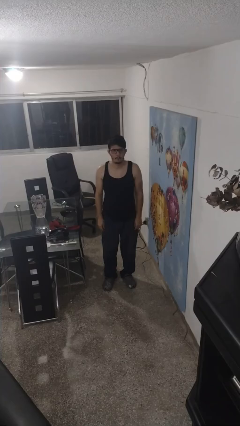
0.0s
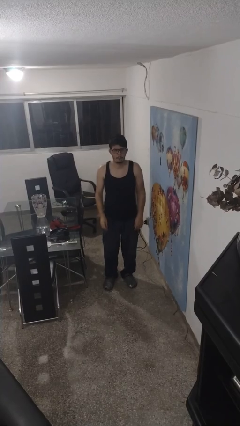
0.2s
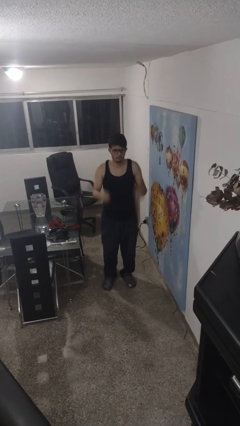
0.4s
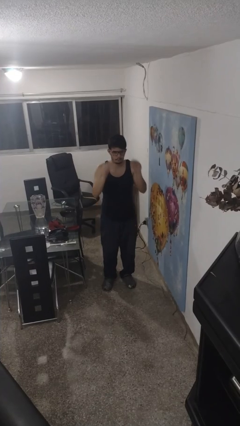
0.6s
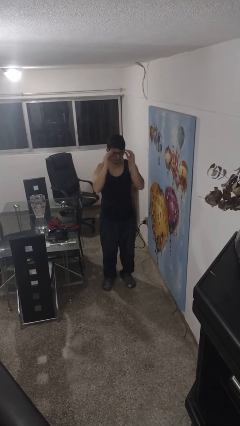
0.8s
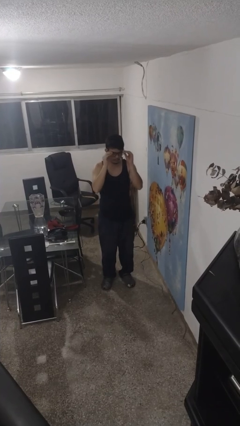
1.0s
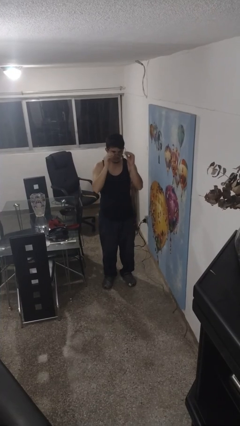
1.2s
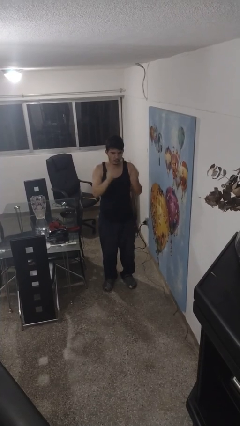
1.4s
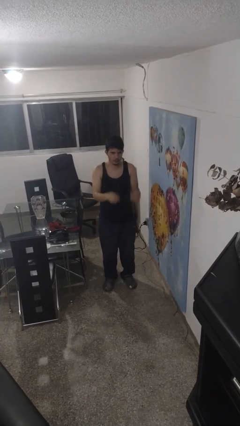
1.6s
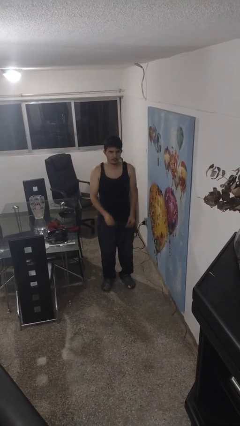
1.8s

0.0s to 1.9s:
person takes off glasses

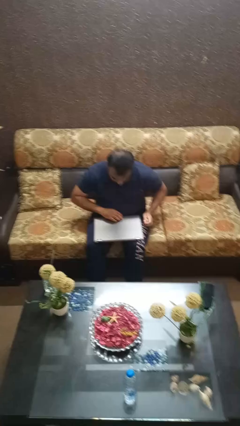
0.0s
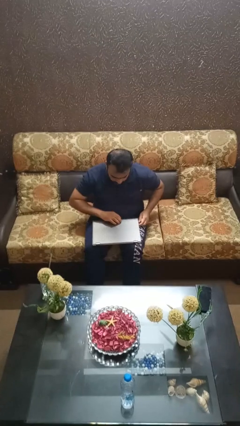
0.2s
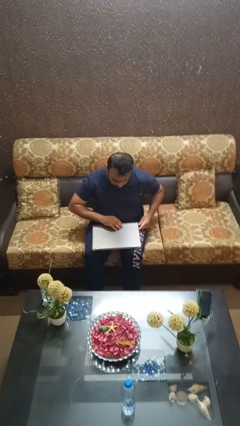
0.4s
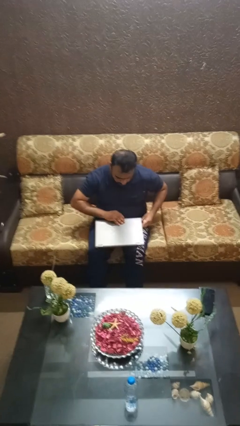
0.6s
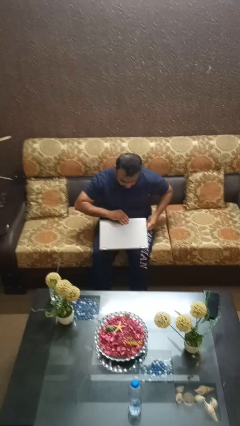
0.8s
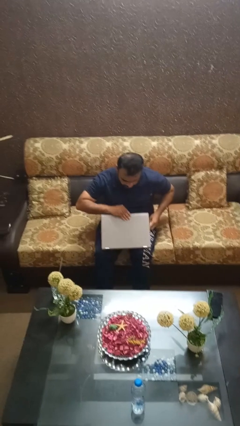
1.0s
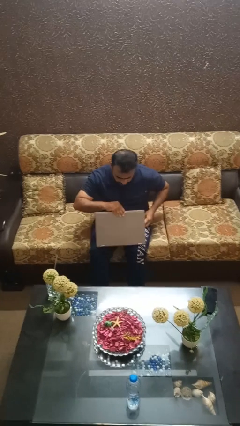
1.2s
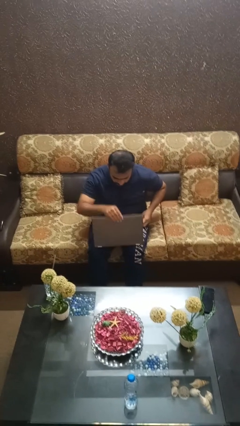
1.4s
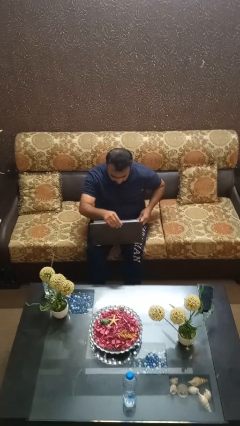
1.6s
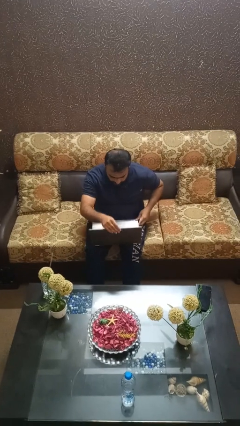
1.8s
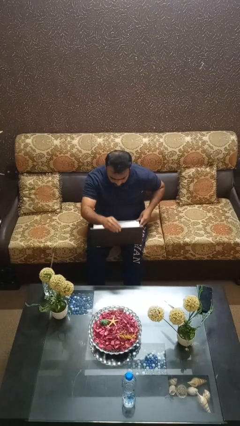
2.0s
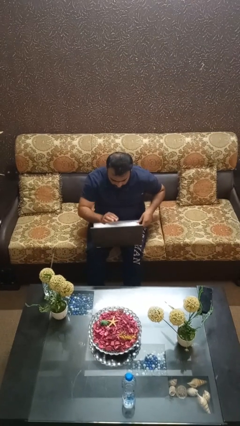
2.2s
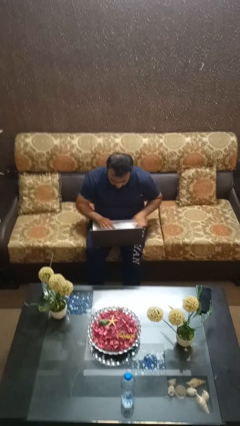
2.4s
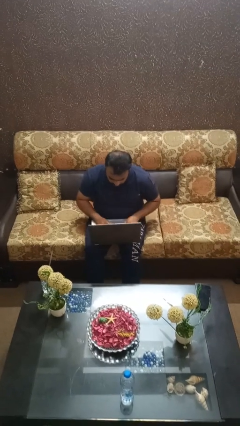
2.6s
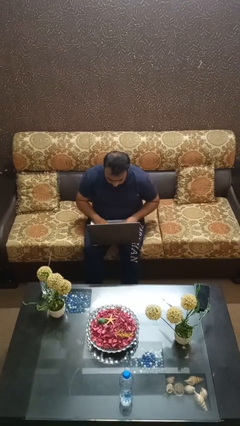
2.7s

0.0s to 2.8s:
person opens laptop

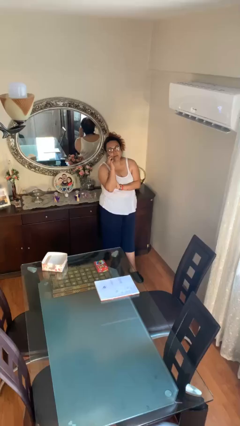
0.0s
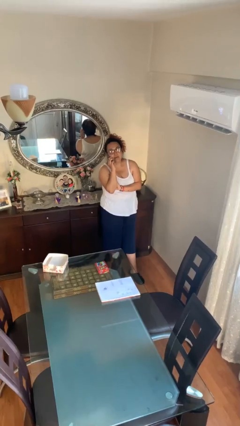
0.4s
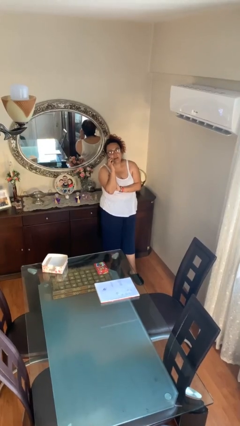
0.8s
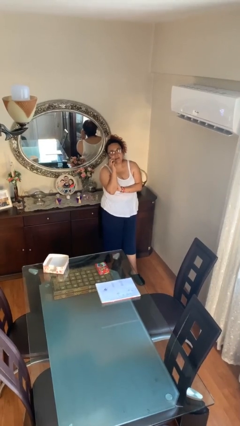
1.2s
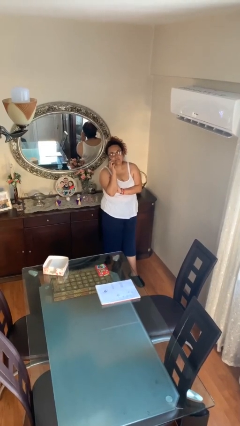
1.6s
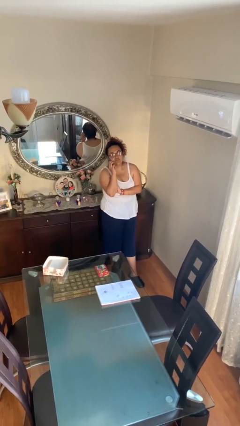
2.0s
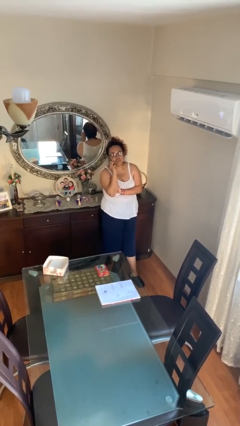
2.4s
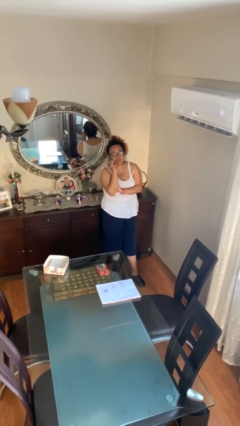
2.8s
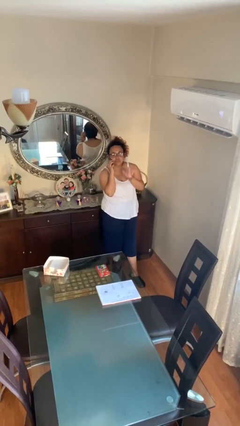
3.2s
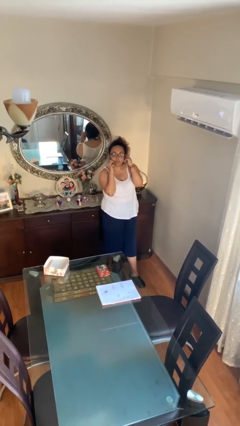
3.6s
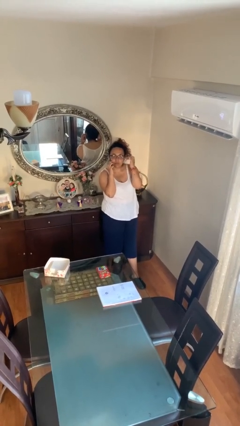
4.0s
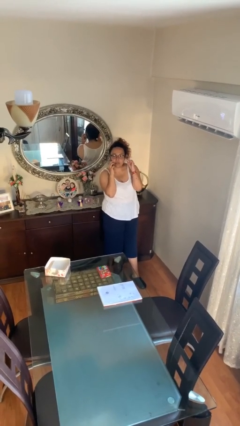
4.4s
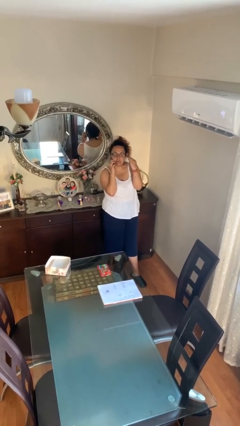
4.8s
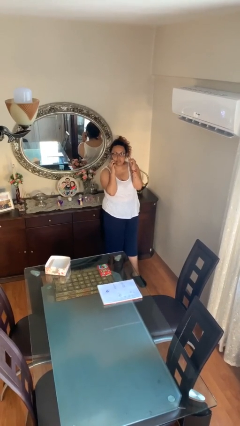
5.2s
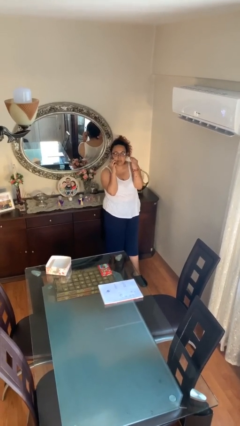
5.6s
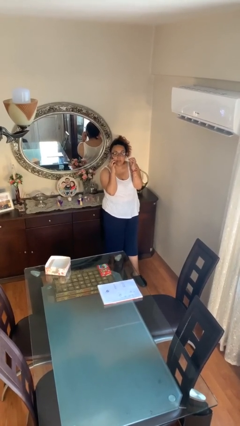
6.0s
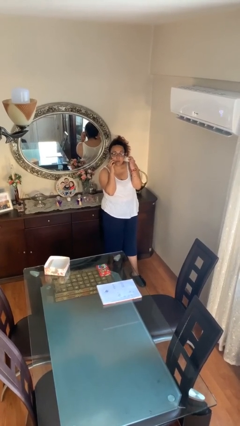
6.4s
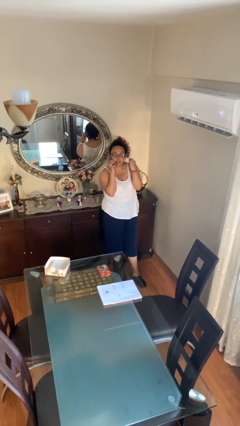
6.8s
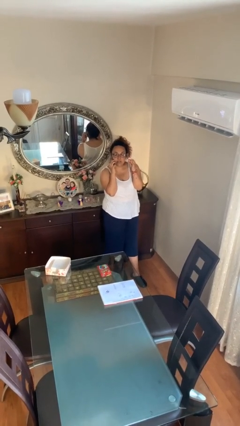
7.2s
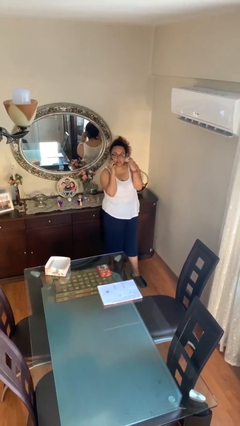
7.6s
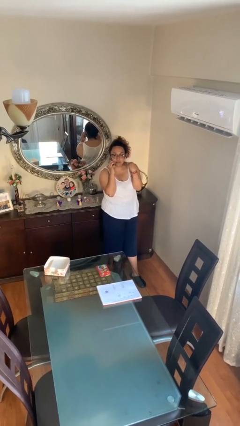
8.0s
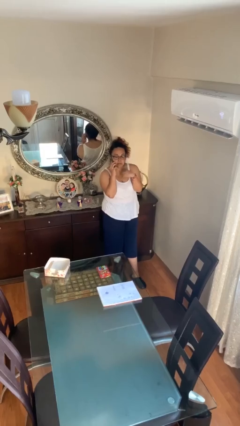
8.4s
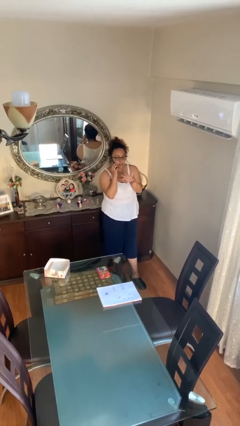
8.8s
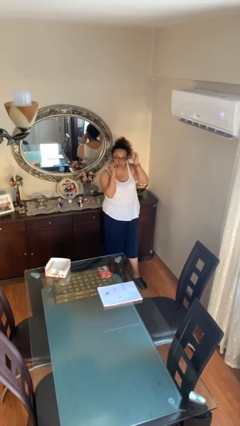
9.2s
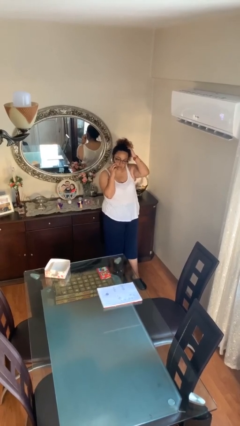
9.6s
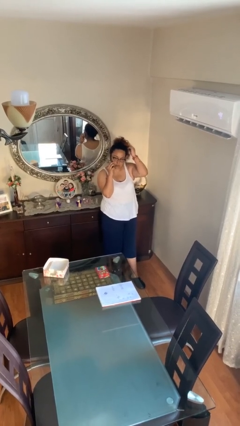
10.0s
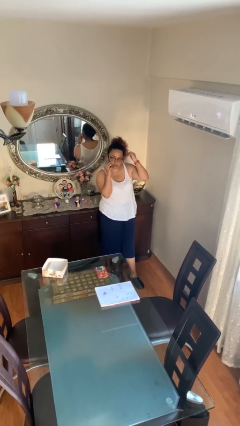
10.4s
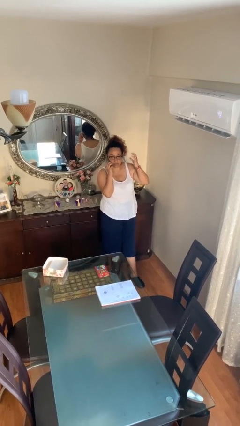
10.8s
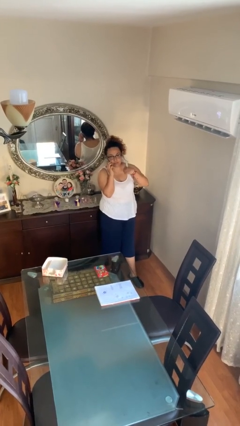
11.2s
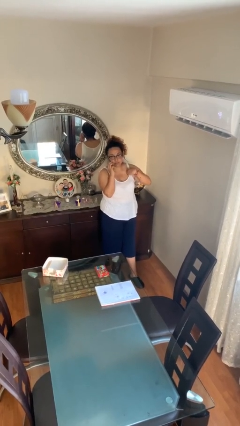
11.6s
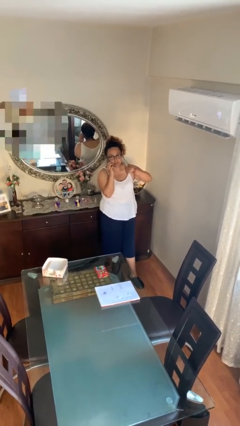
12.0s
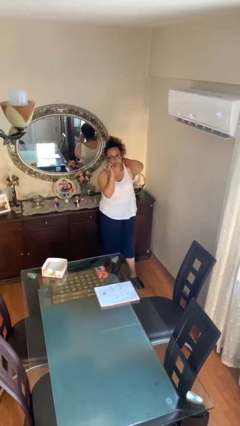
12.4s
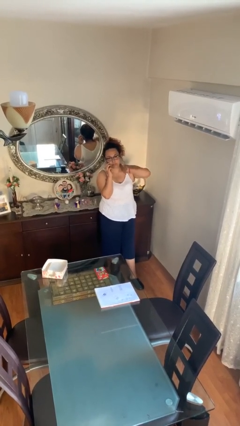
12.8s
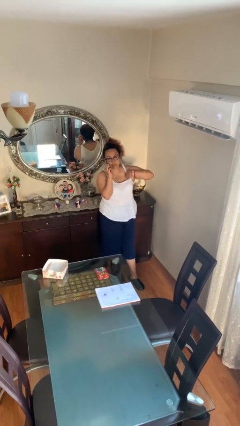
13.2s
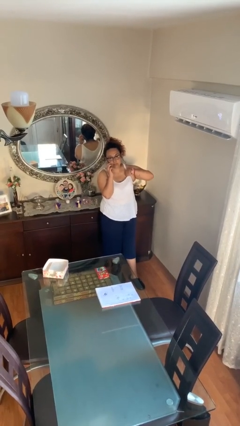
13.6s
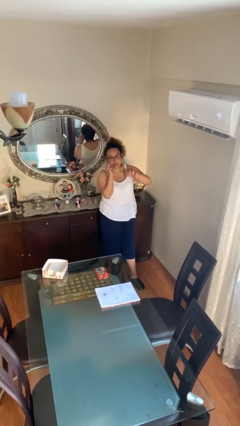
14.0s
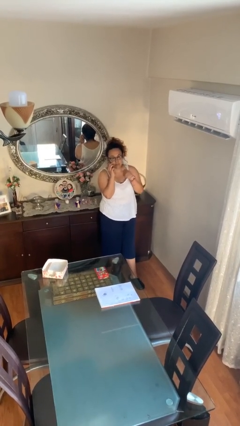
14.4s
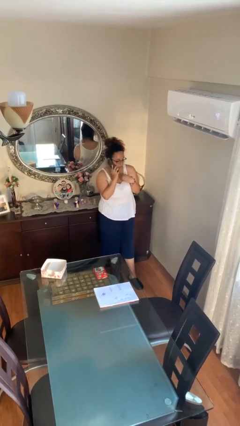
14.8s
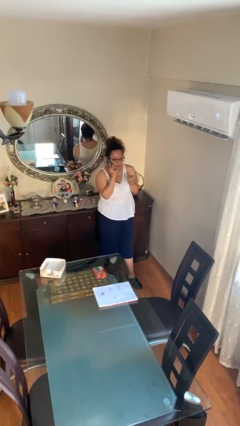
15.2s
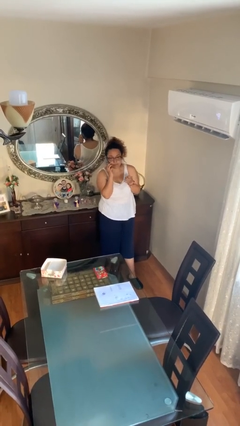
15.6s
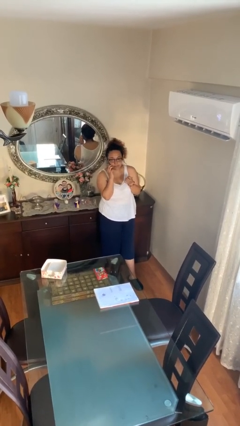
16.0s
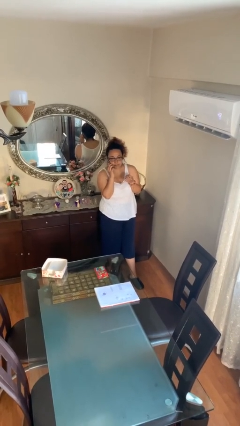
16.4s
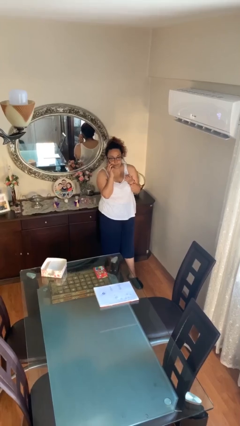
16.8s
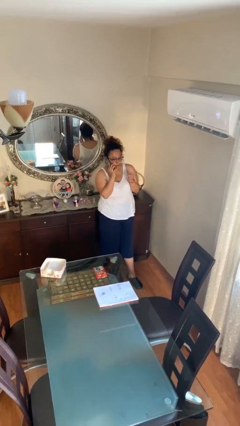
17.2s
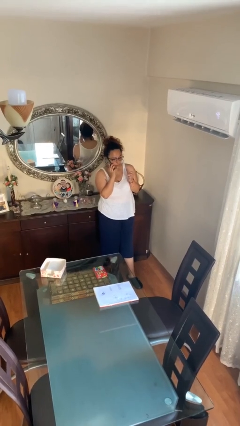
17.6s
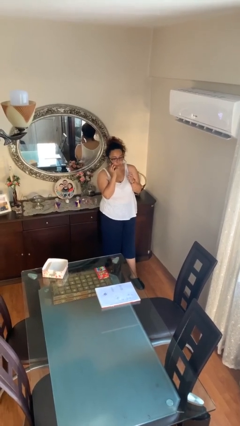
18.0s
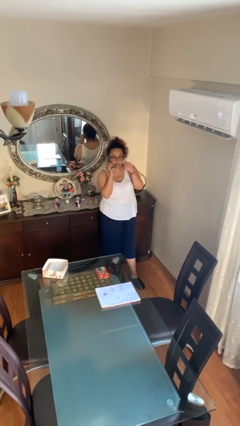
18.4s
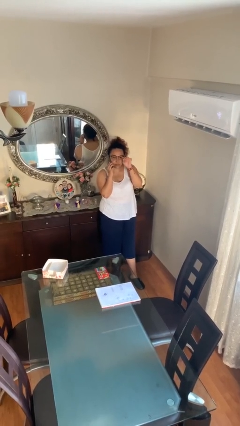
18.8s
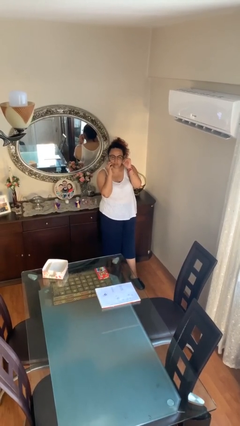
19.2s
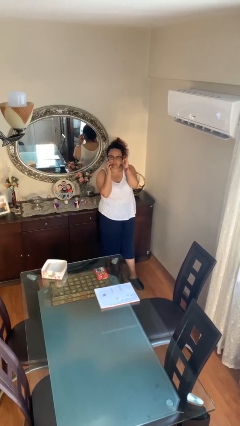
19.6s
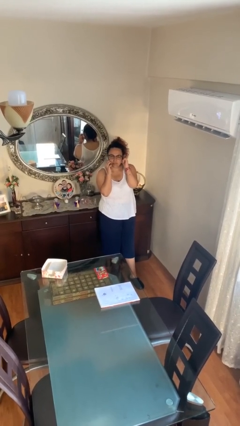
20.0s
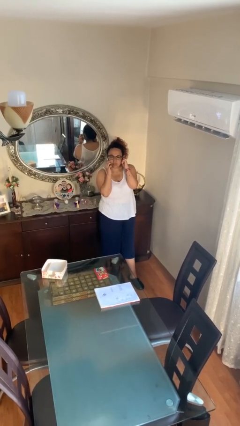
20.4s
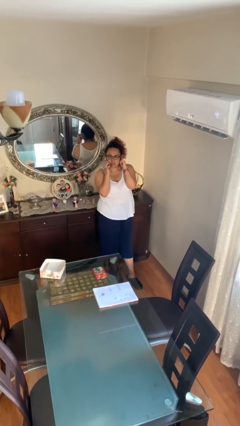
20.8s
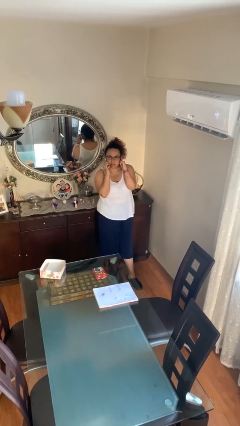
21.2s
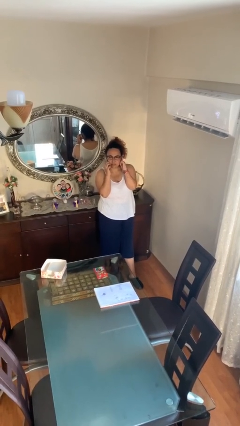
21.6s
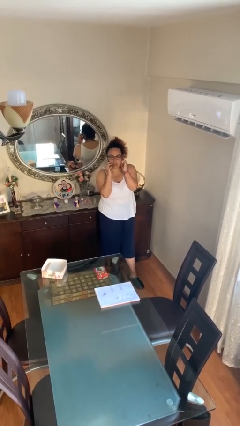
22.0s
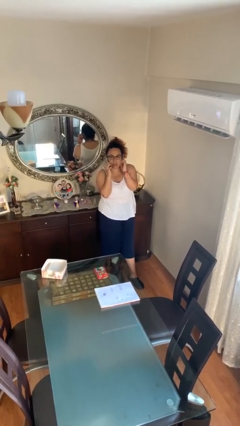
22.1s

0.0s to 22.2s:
person talks on phone

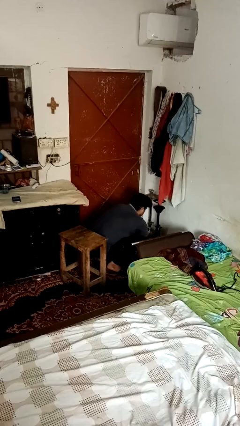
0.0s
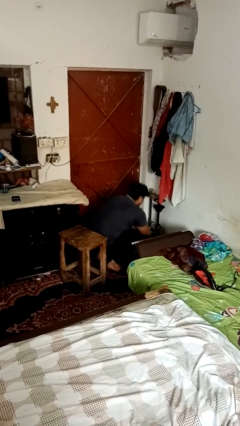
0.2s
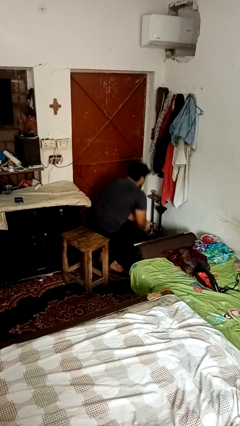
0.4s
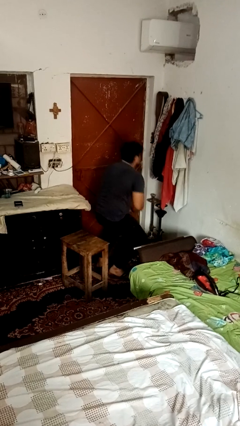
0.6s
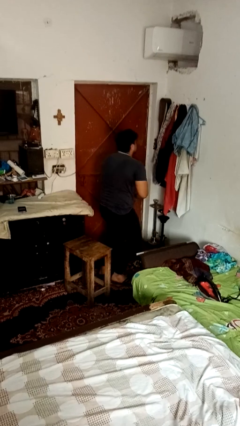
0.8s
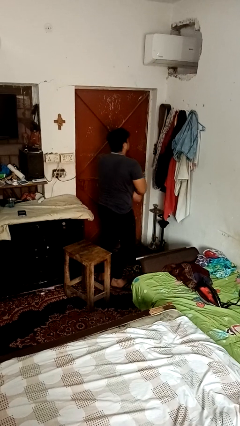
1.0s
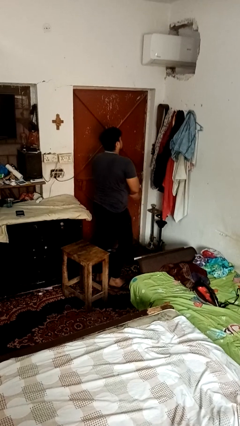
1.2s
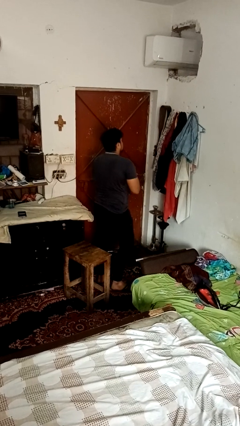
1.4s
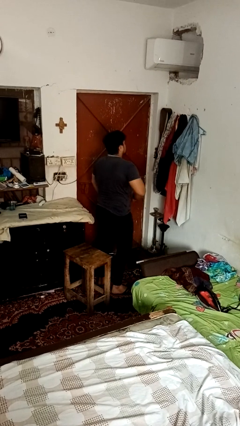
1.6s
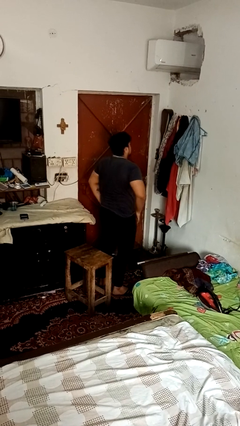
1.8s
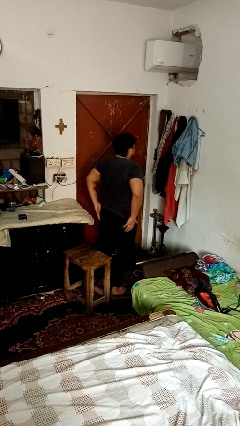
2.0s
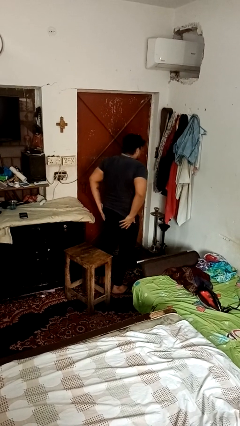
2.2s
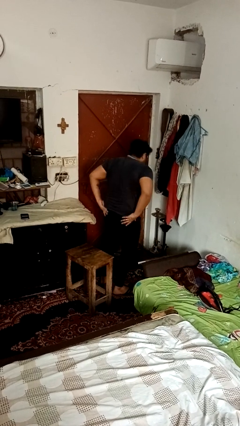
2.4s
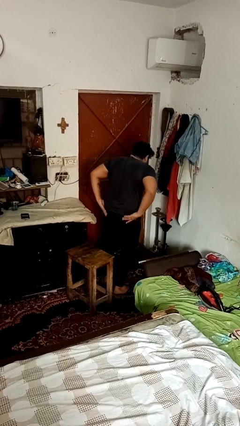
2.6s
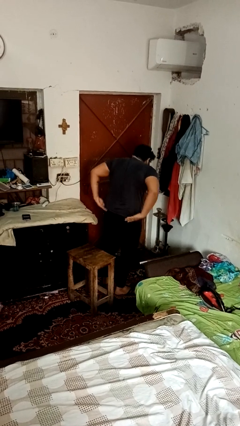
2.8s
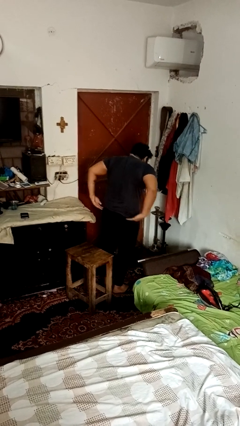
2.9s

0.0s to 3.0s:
person stands up from floor
